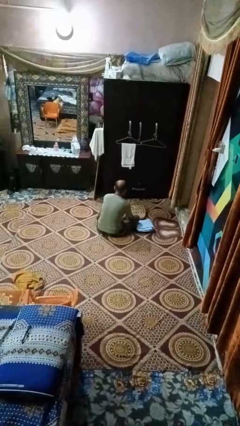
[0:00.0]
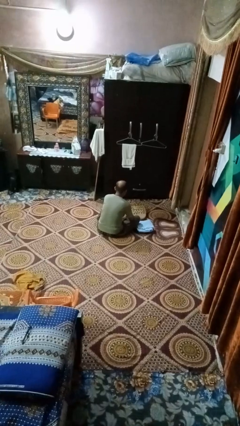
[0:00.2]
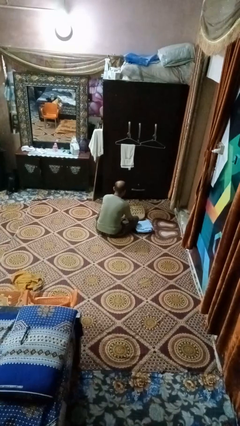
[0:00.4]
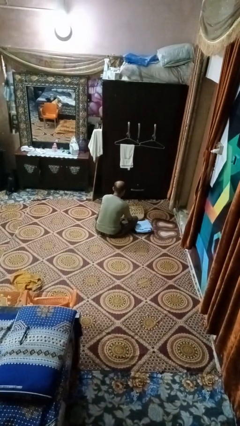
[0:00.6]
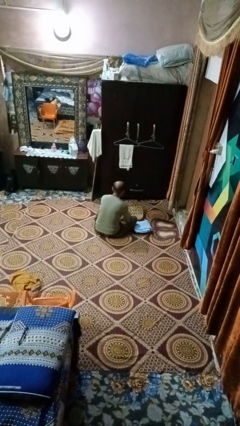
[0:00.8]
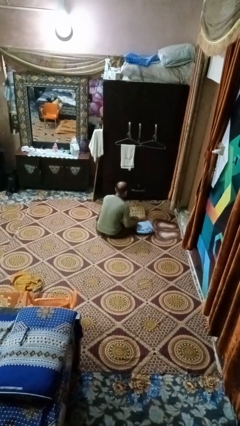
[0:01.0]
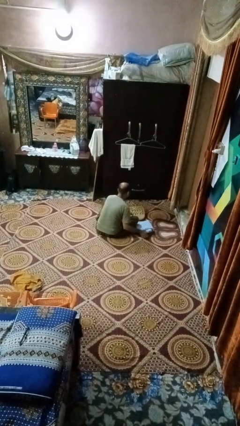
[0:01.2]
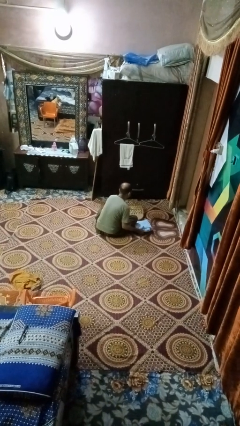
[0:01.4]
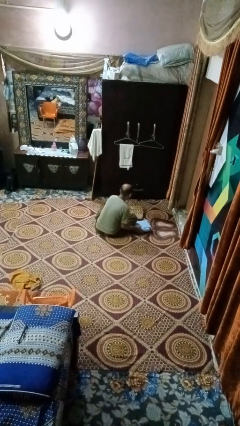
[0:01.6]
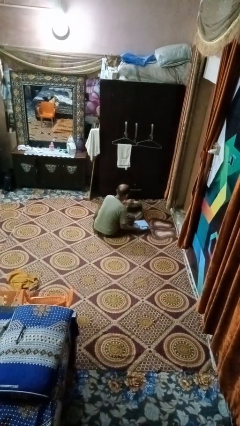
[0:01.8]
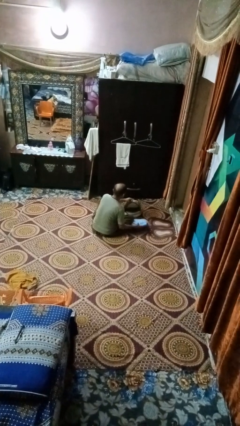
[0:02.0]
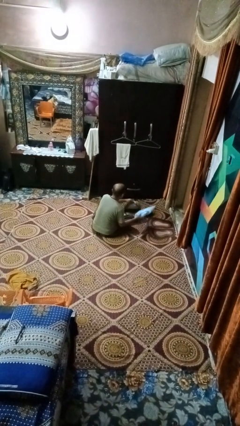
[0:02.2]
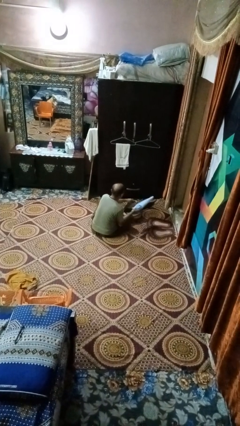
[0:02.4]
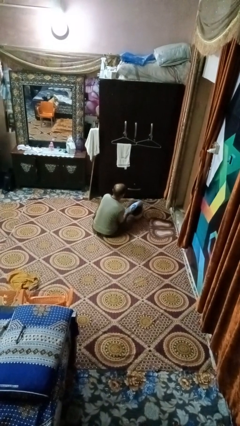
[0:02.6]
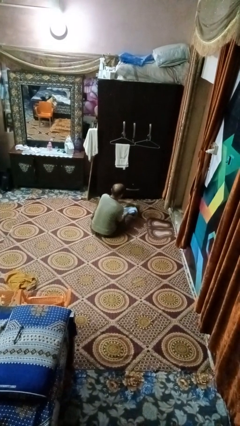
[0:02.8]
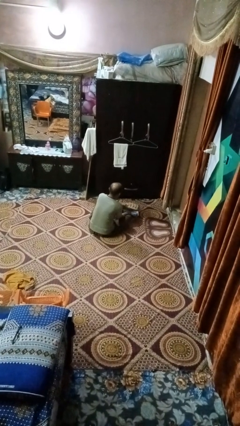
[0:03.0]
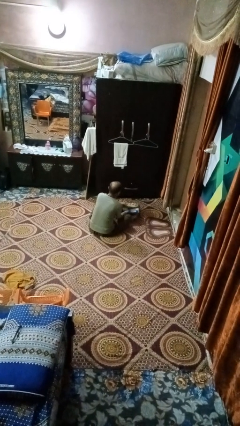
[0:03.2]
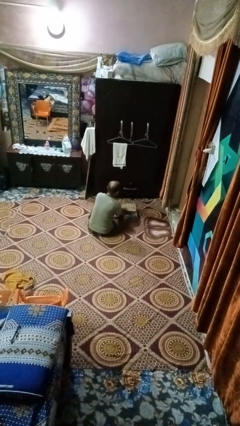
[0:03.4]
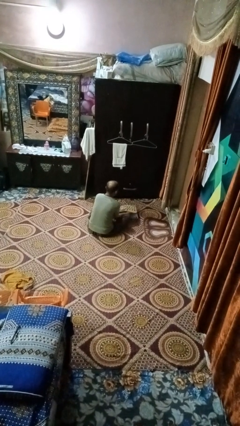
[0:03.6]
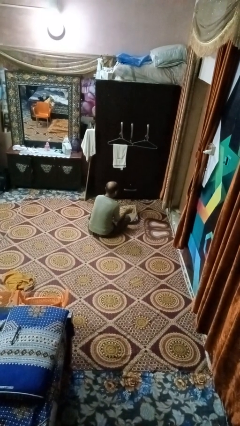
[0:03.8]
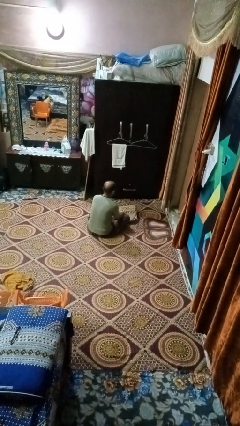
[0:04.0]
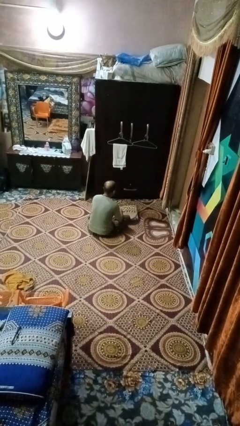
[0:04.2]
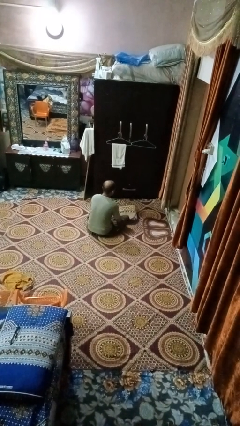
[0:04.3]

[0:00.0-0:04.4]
person puts on backpack

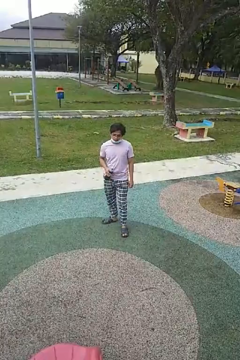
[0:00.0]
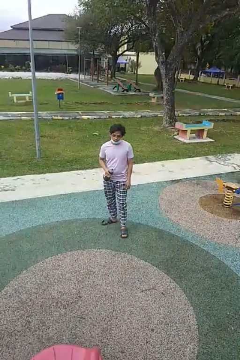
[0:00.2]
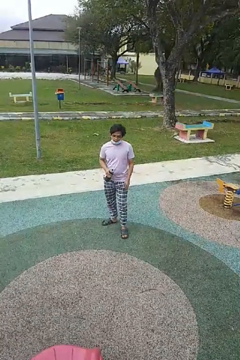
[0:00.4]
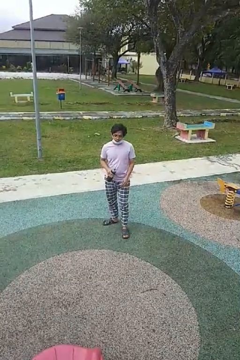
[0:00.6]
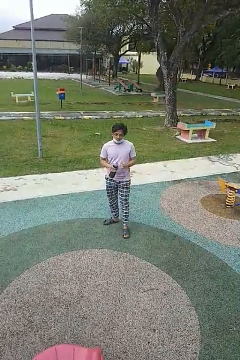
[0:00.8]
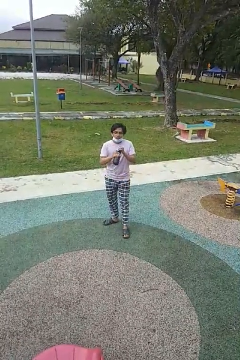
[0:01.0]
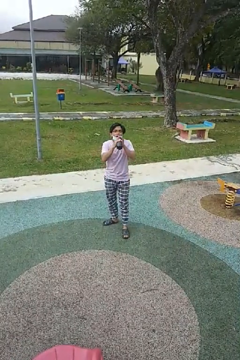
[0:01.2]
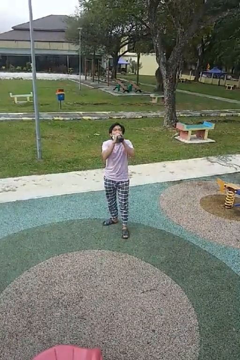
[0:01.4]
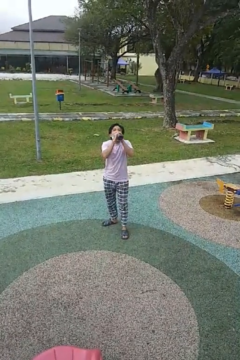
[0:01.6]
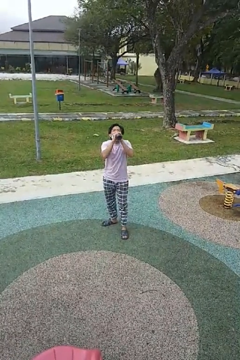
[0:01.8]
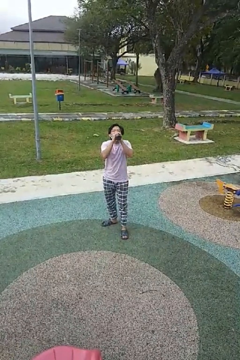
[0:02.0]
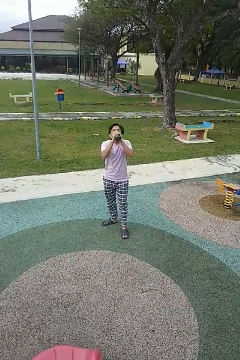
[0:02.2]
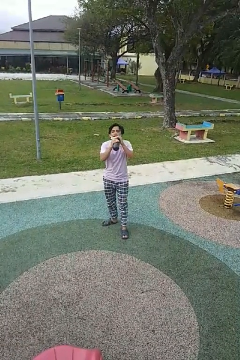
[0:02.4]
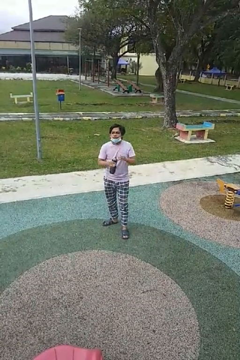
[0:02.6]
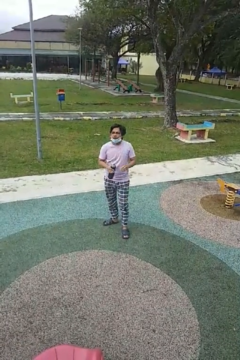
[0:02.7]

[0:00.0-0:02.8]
person drinks from bottle

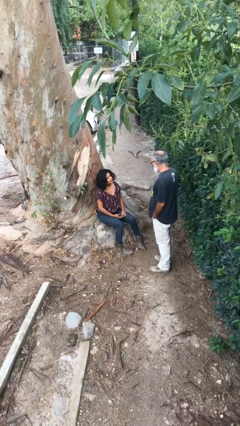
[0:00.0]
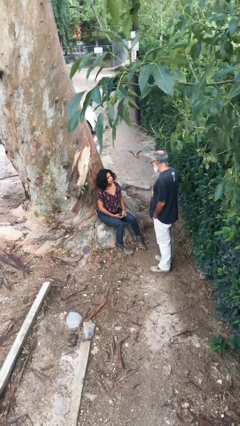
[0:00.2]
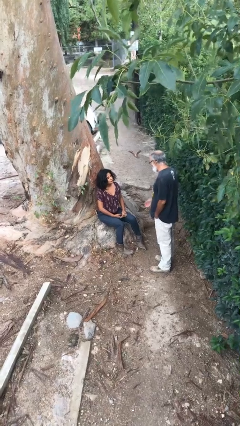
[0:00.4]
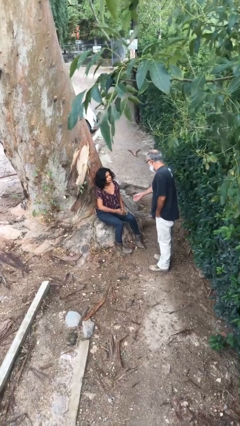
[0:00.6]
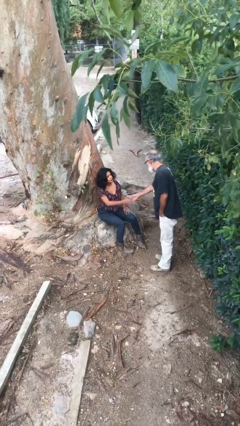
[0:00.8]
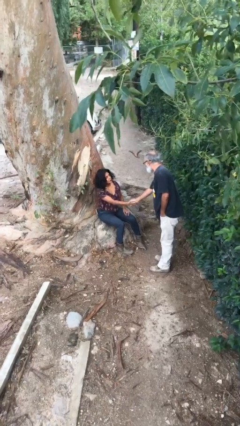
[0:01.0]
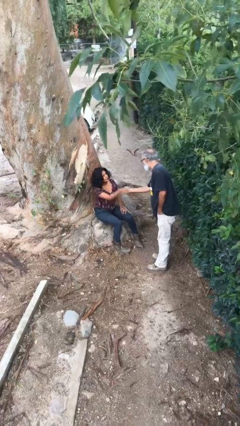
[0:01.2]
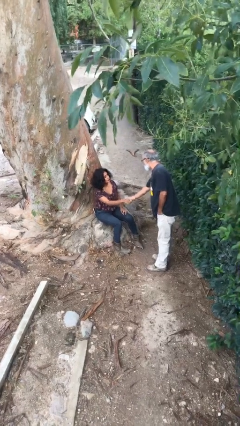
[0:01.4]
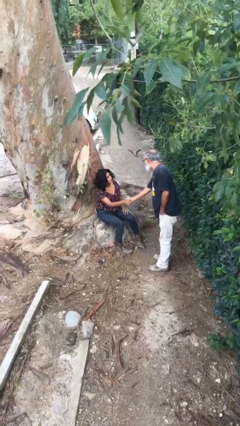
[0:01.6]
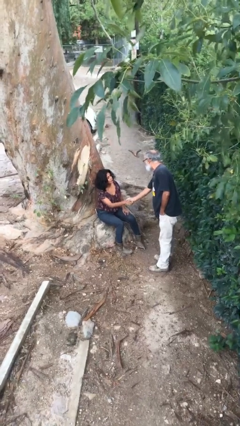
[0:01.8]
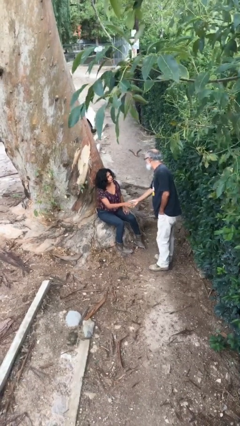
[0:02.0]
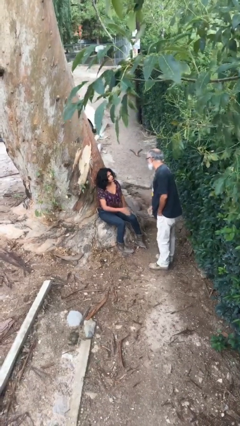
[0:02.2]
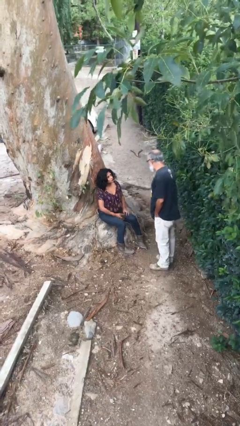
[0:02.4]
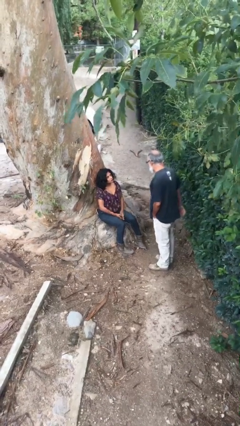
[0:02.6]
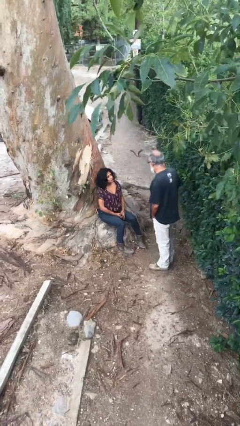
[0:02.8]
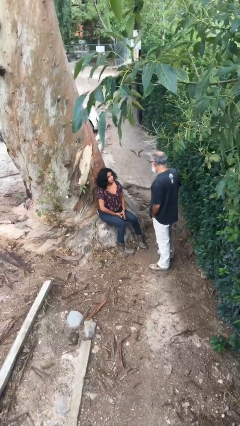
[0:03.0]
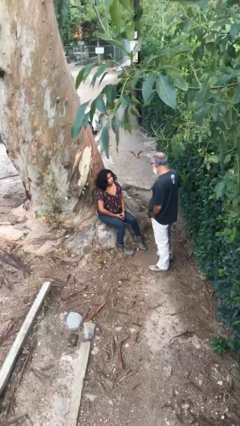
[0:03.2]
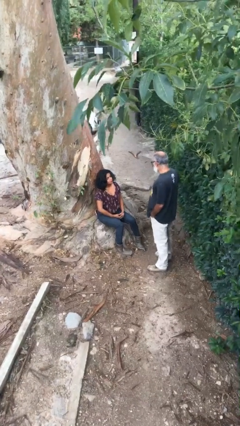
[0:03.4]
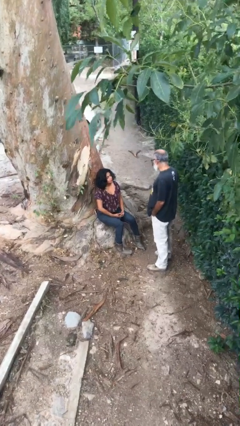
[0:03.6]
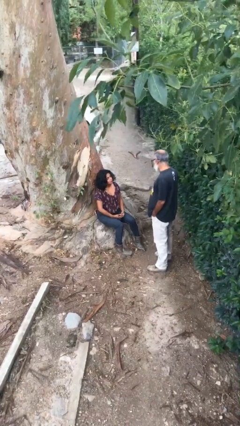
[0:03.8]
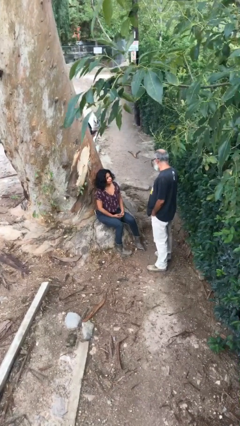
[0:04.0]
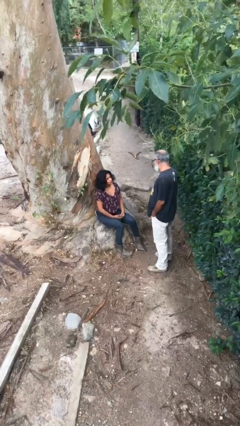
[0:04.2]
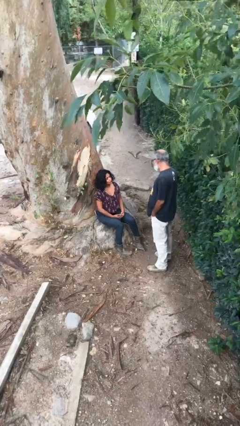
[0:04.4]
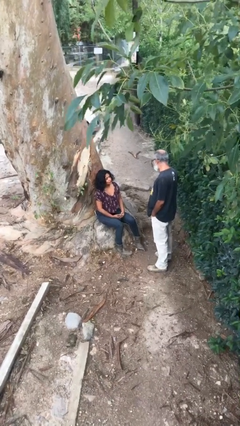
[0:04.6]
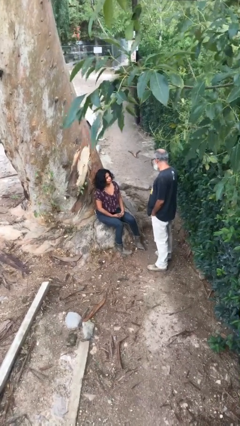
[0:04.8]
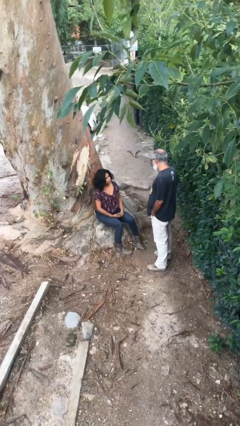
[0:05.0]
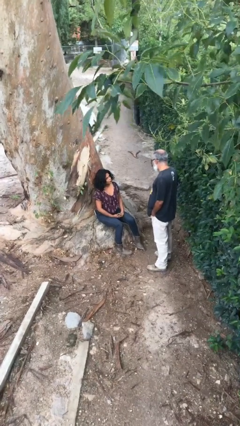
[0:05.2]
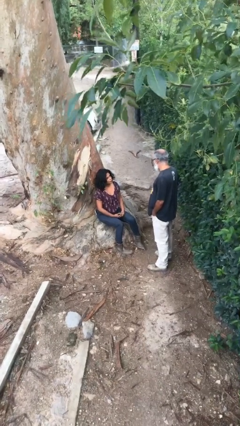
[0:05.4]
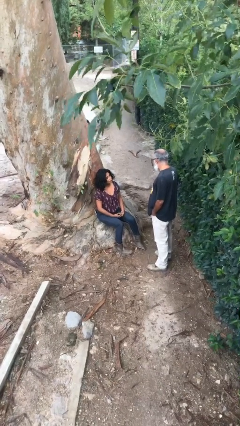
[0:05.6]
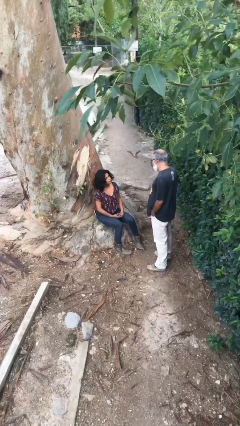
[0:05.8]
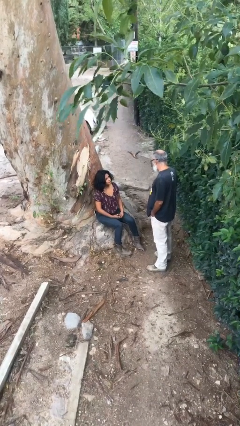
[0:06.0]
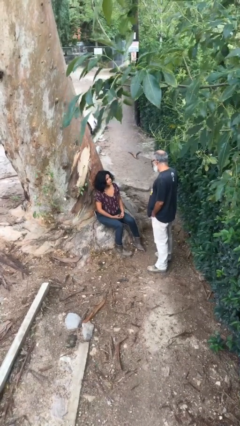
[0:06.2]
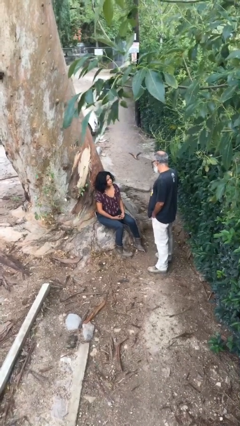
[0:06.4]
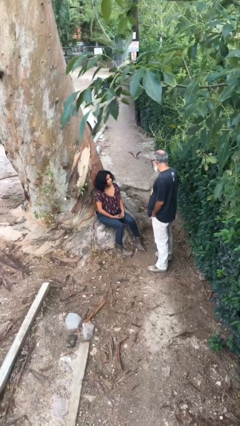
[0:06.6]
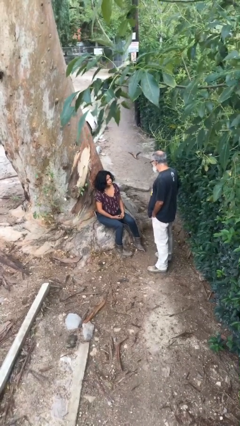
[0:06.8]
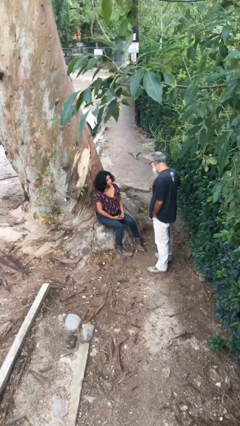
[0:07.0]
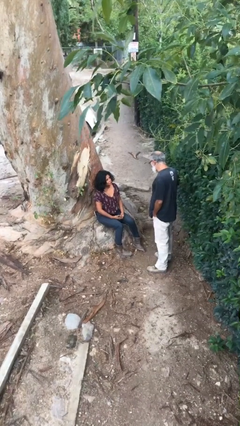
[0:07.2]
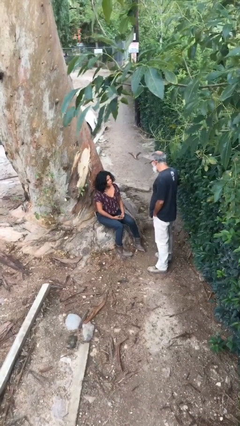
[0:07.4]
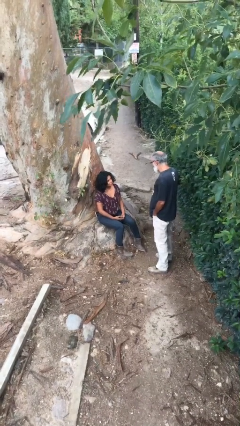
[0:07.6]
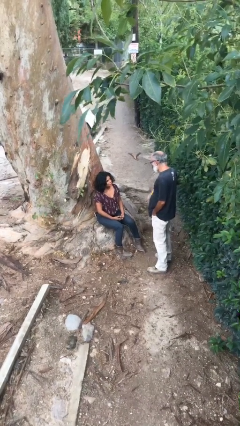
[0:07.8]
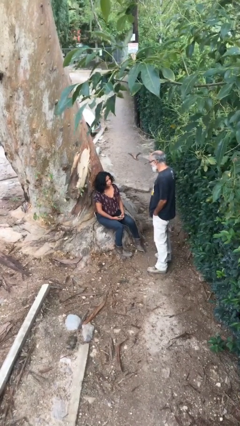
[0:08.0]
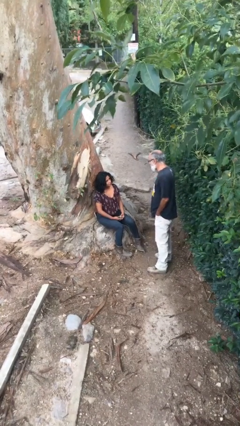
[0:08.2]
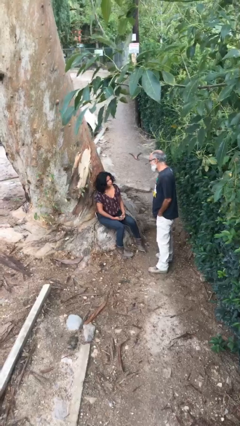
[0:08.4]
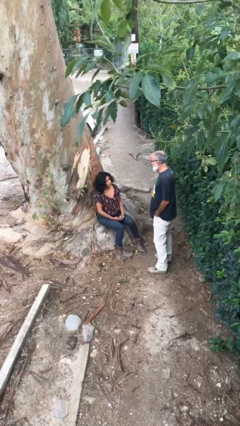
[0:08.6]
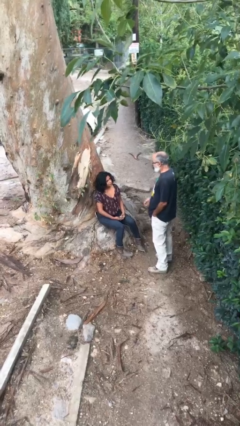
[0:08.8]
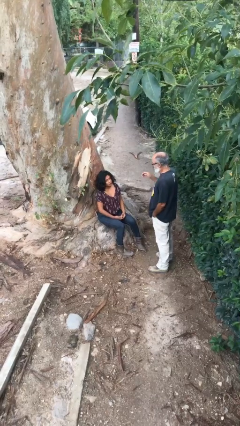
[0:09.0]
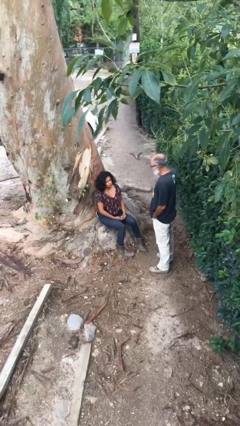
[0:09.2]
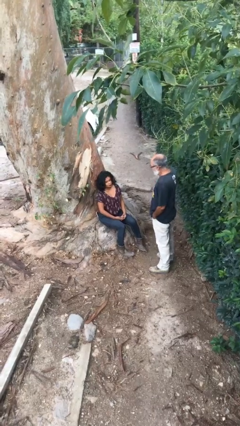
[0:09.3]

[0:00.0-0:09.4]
person shakes hand

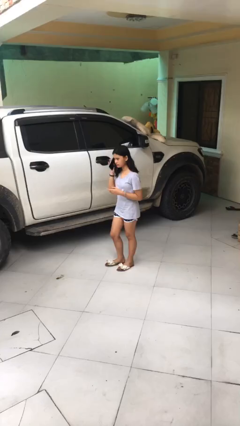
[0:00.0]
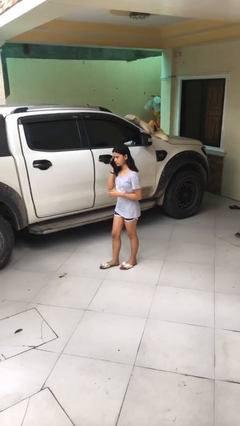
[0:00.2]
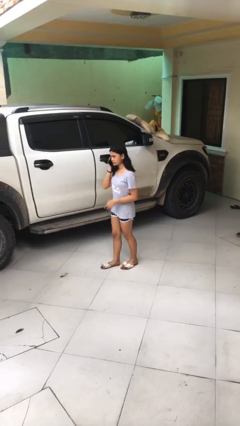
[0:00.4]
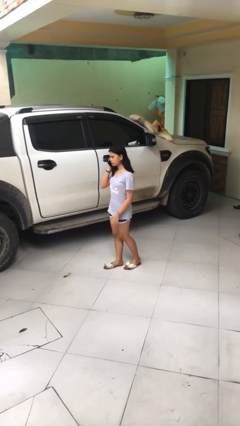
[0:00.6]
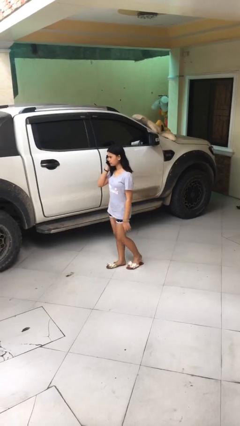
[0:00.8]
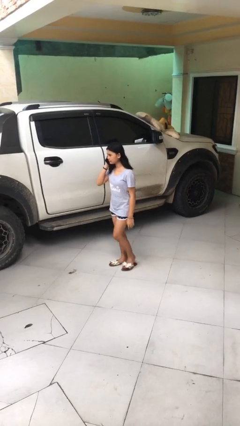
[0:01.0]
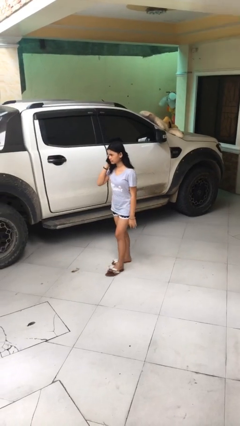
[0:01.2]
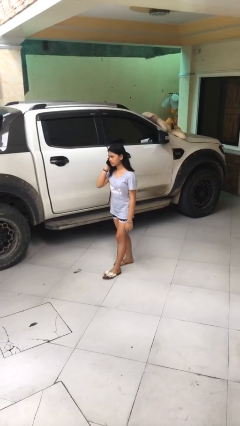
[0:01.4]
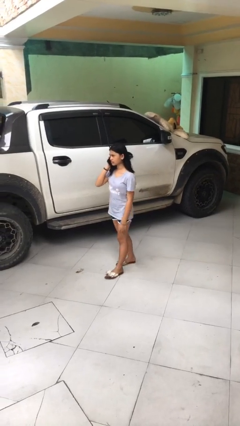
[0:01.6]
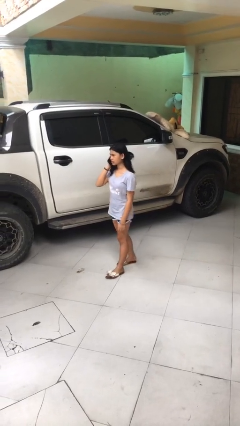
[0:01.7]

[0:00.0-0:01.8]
person talks on phone

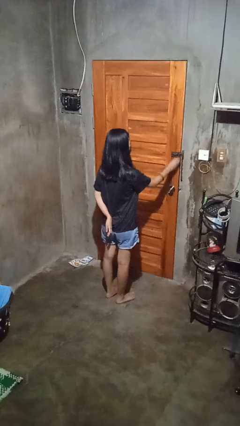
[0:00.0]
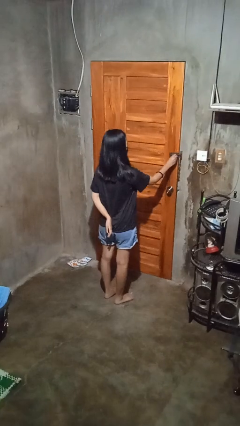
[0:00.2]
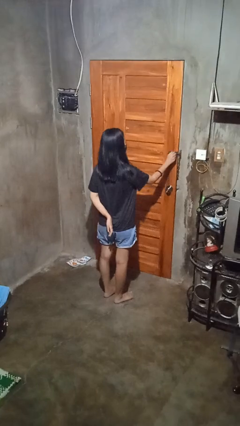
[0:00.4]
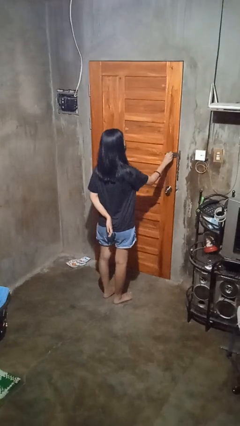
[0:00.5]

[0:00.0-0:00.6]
person unlocks door with keys
